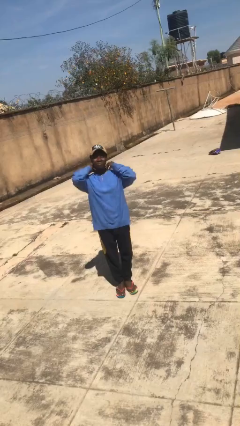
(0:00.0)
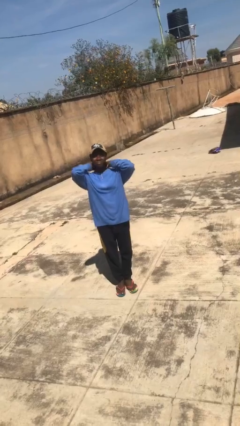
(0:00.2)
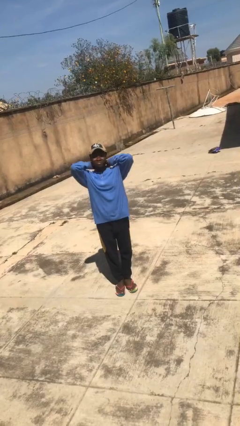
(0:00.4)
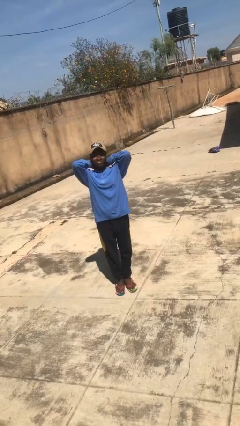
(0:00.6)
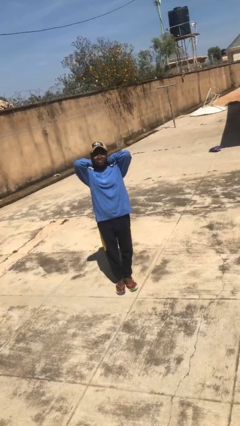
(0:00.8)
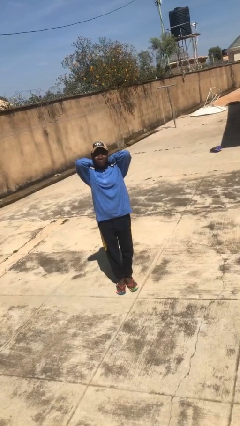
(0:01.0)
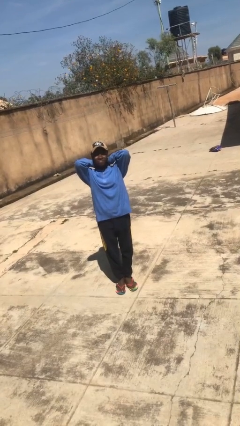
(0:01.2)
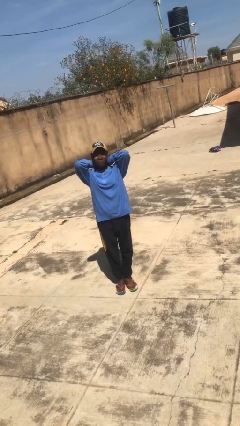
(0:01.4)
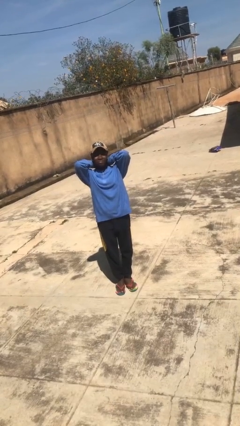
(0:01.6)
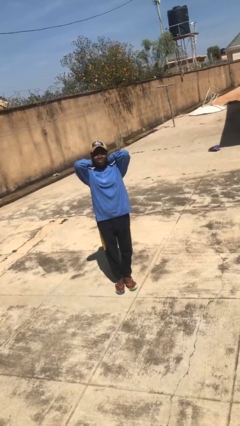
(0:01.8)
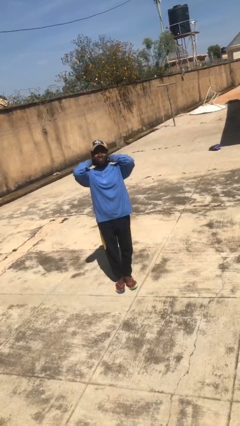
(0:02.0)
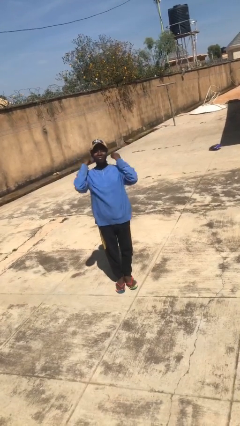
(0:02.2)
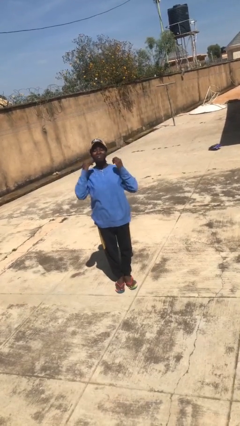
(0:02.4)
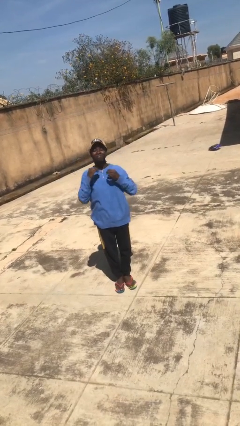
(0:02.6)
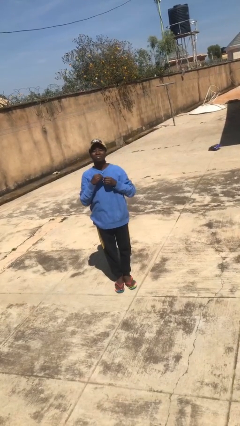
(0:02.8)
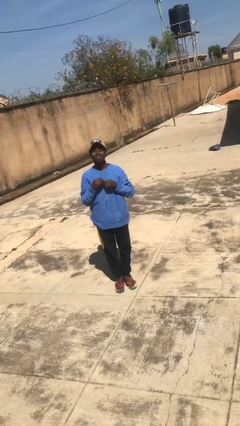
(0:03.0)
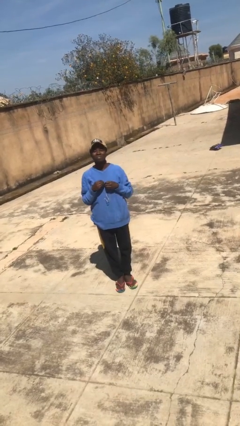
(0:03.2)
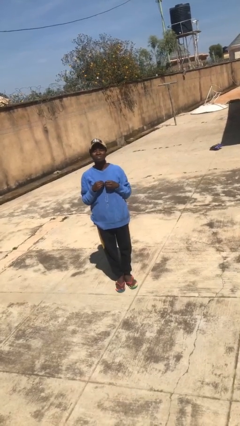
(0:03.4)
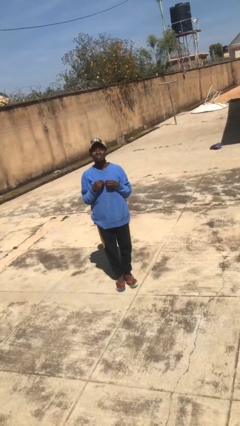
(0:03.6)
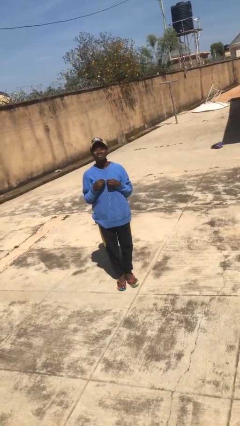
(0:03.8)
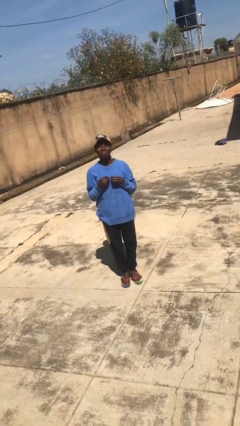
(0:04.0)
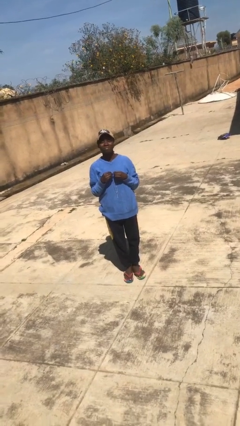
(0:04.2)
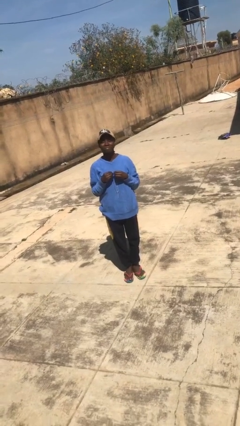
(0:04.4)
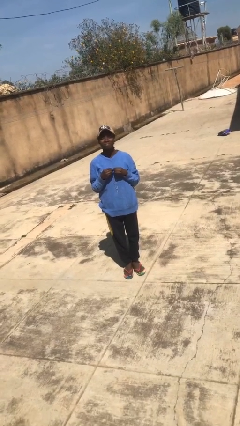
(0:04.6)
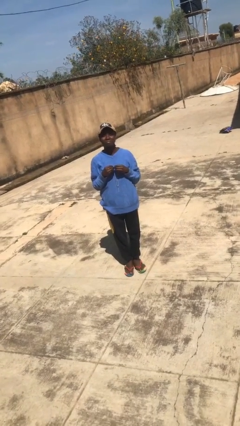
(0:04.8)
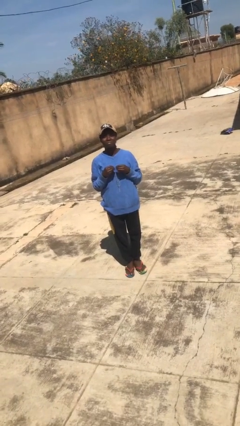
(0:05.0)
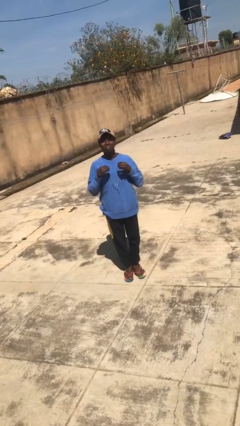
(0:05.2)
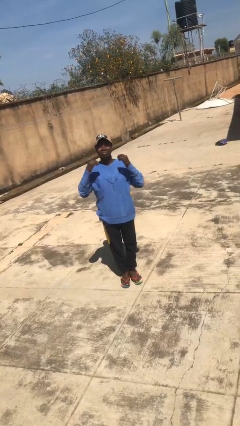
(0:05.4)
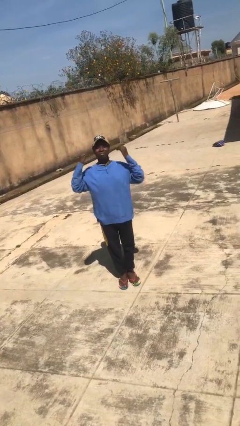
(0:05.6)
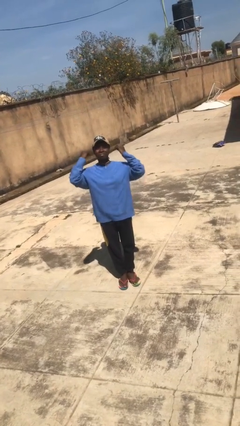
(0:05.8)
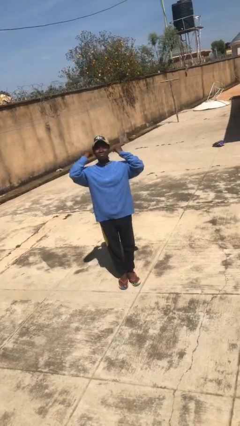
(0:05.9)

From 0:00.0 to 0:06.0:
person takes off necklace

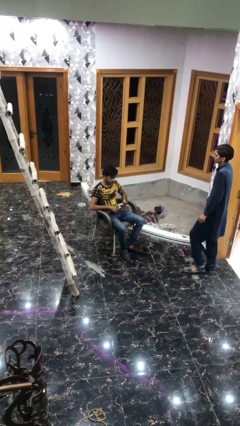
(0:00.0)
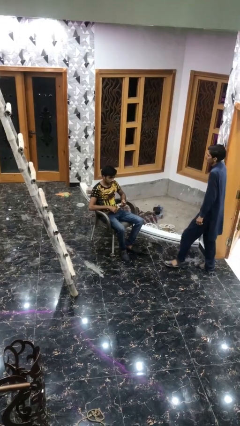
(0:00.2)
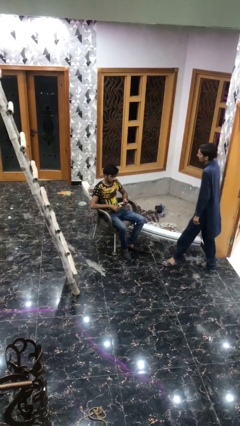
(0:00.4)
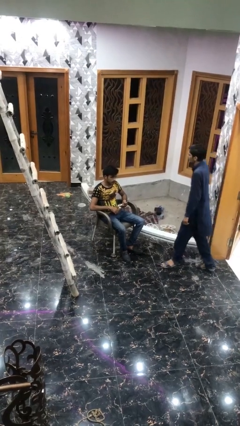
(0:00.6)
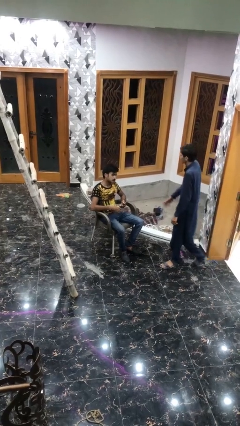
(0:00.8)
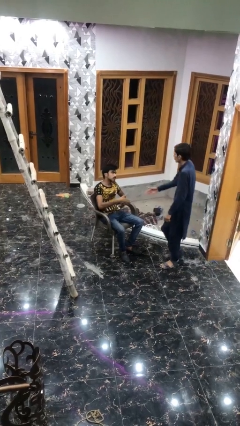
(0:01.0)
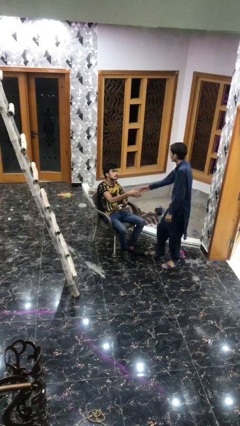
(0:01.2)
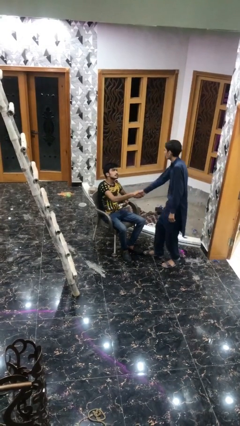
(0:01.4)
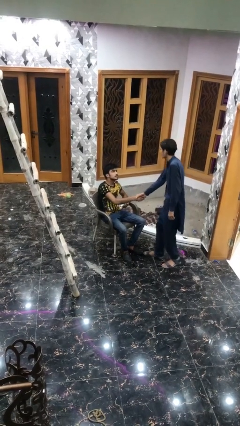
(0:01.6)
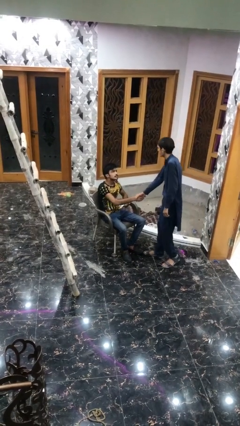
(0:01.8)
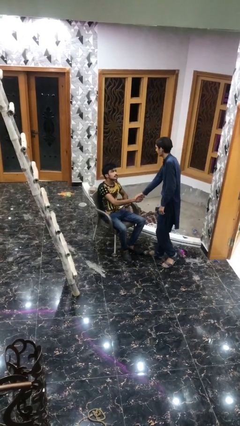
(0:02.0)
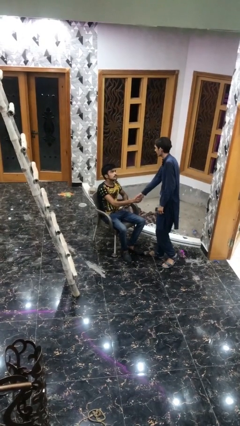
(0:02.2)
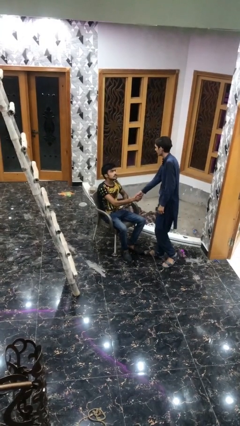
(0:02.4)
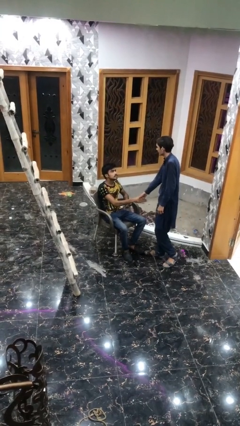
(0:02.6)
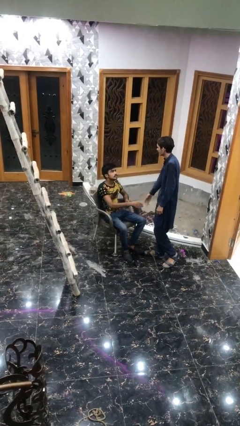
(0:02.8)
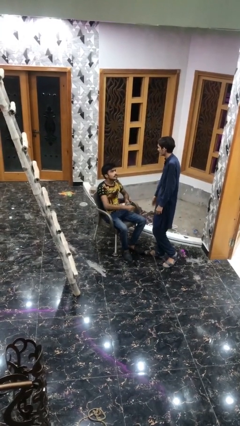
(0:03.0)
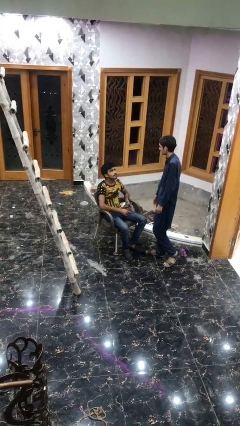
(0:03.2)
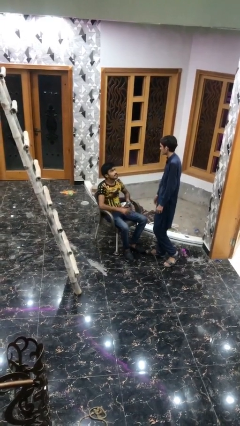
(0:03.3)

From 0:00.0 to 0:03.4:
person shakes hand

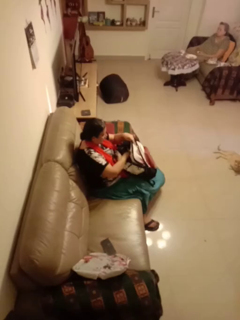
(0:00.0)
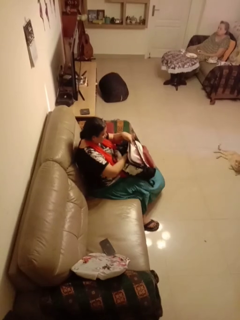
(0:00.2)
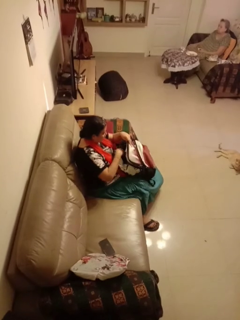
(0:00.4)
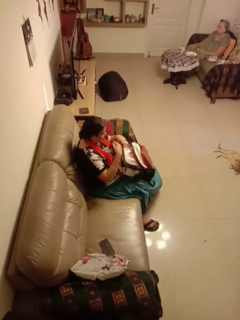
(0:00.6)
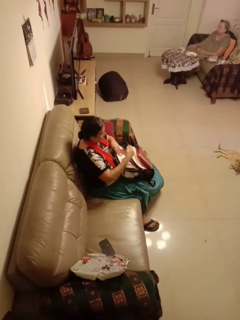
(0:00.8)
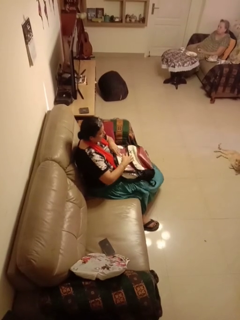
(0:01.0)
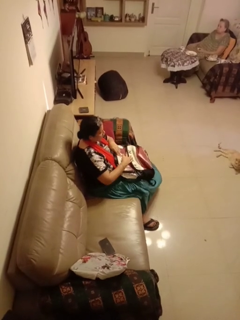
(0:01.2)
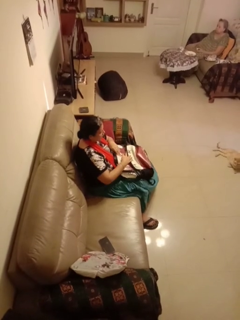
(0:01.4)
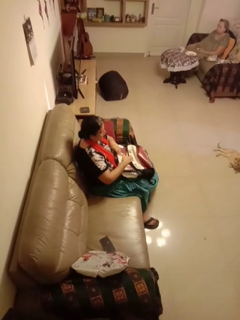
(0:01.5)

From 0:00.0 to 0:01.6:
person puts object into backpack

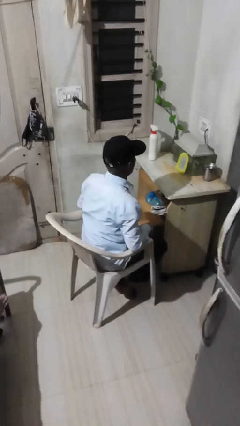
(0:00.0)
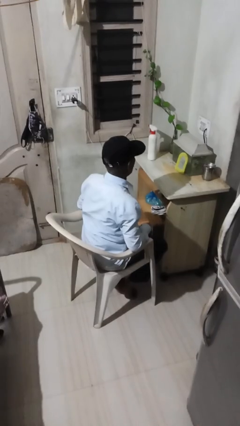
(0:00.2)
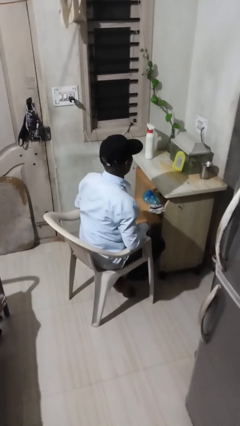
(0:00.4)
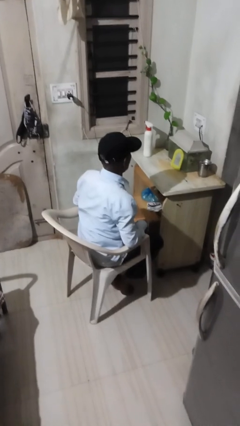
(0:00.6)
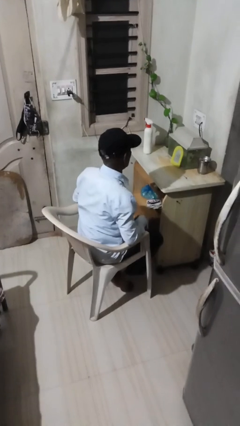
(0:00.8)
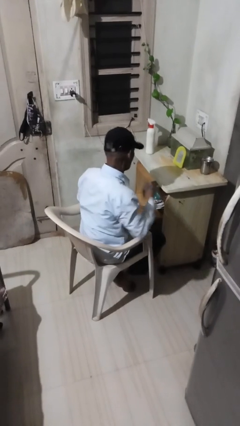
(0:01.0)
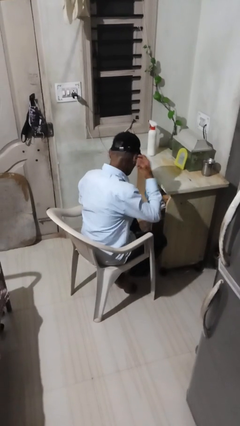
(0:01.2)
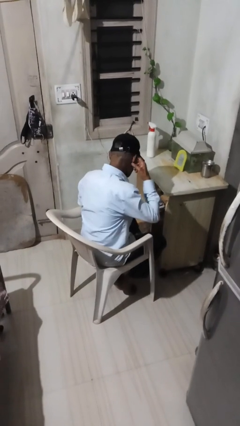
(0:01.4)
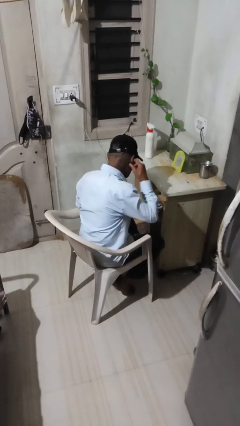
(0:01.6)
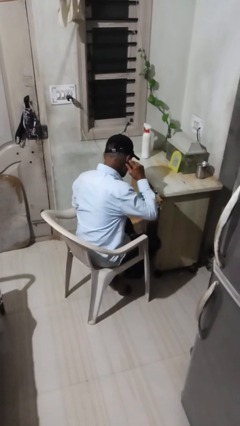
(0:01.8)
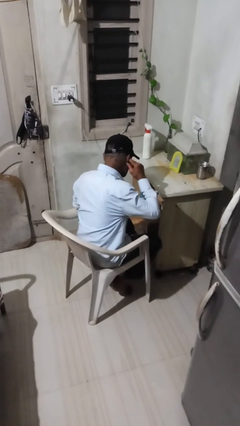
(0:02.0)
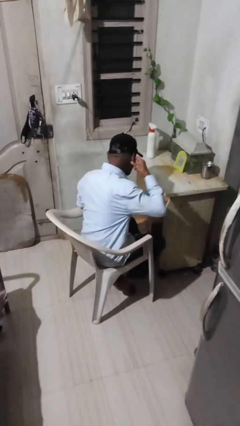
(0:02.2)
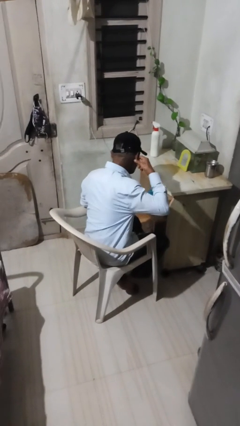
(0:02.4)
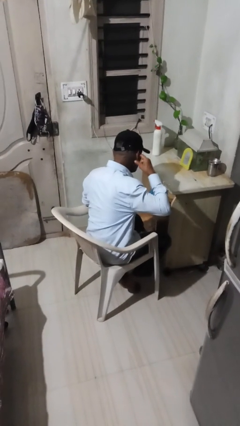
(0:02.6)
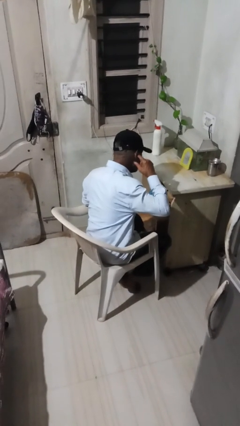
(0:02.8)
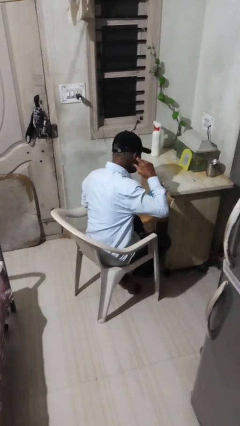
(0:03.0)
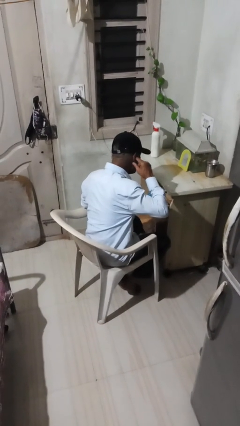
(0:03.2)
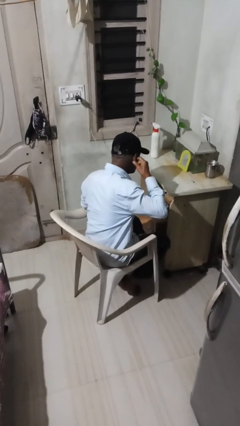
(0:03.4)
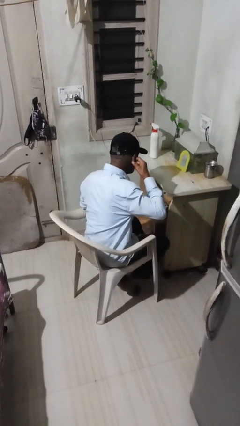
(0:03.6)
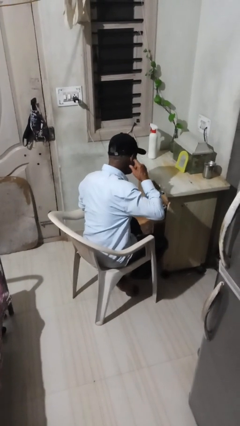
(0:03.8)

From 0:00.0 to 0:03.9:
person puts fingers in ear

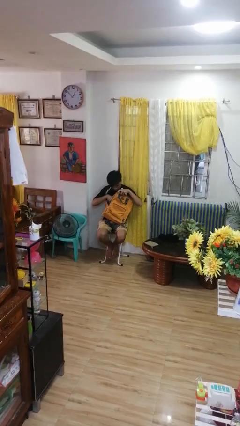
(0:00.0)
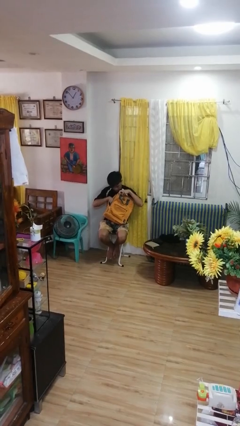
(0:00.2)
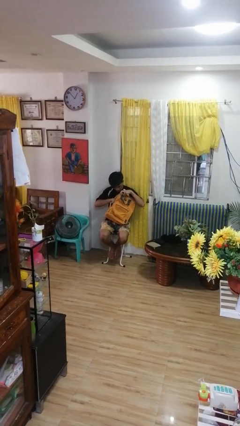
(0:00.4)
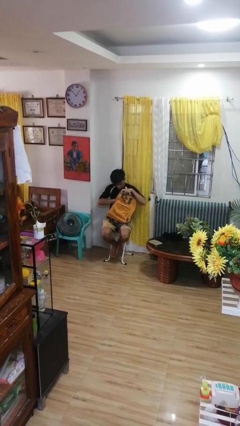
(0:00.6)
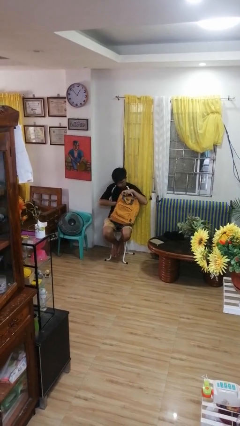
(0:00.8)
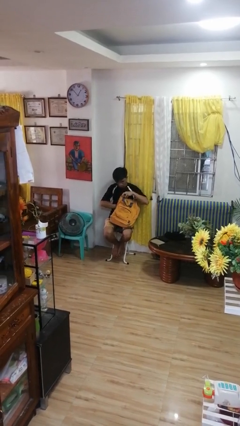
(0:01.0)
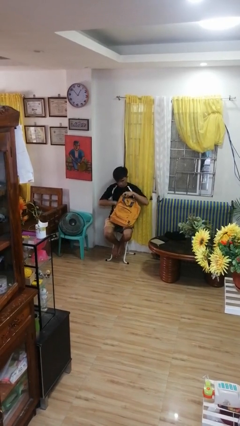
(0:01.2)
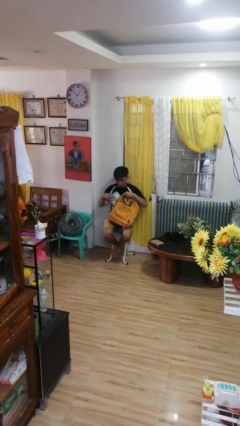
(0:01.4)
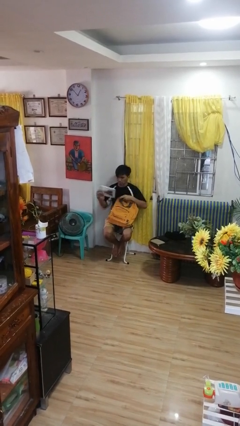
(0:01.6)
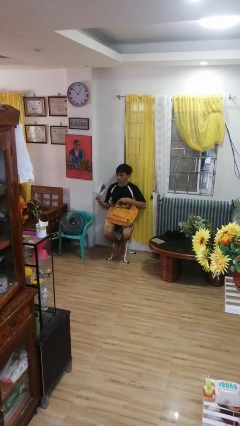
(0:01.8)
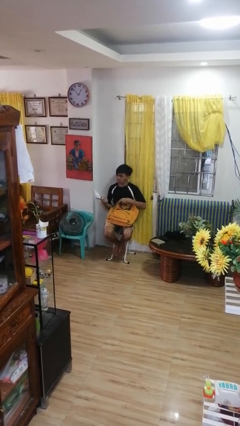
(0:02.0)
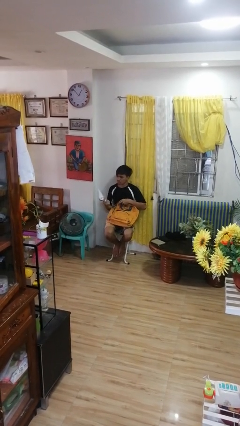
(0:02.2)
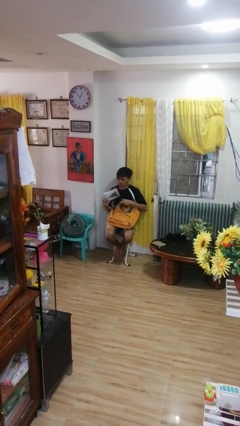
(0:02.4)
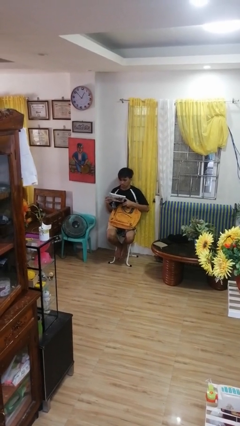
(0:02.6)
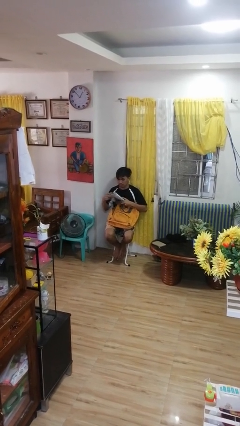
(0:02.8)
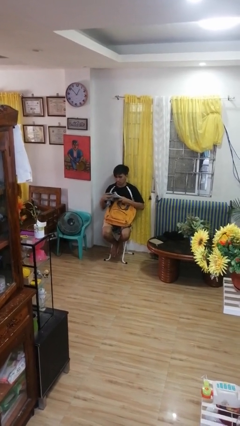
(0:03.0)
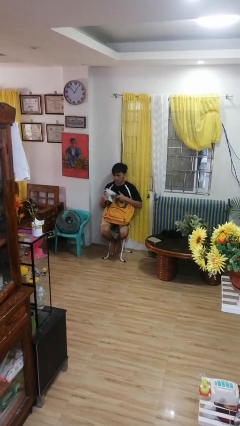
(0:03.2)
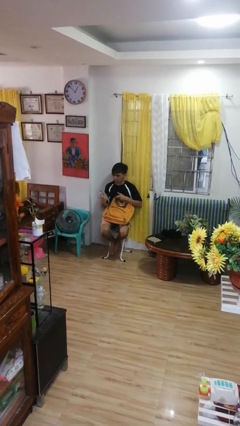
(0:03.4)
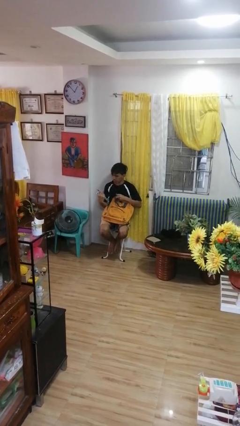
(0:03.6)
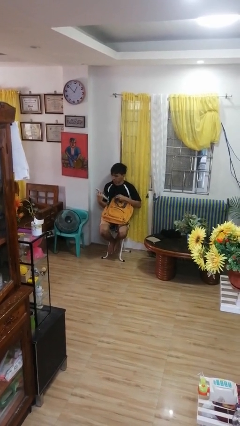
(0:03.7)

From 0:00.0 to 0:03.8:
person takes object from backpack
